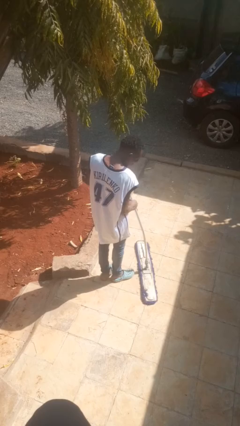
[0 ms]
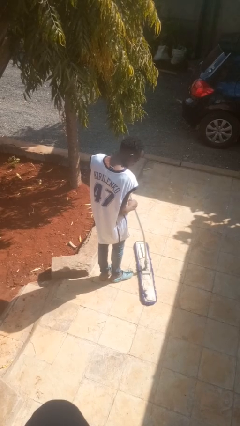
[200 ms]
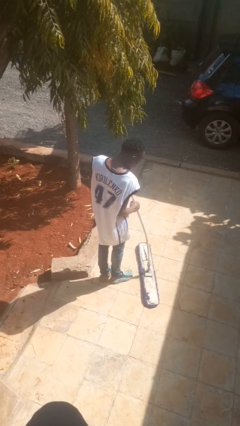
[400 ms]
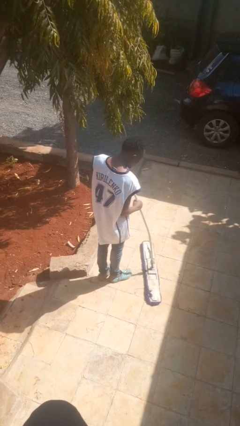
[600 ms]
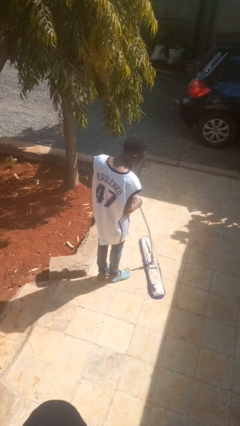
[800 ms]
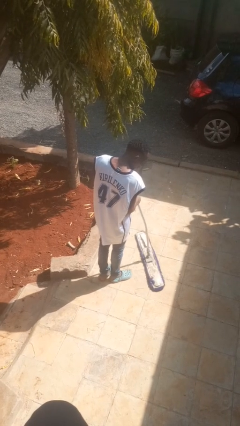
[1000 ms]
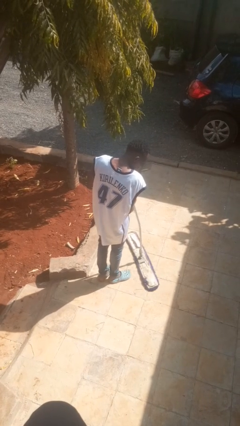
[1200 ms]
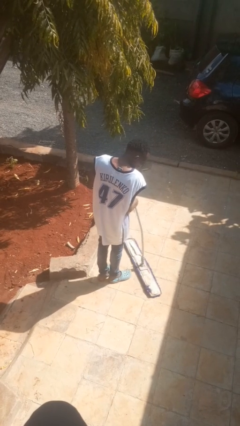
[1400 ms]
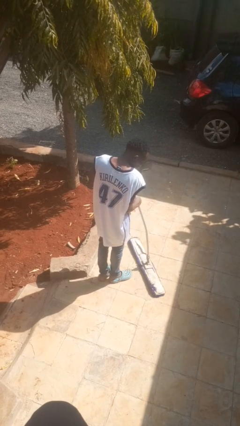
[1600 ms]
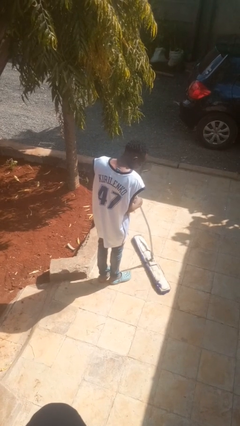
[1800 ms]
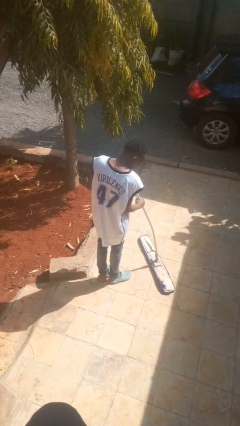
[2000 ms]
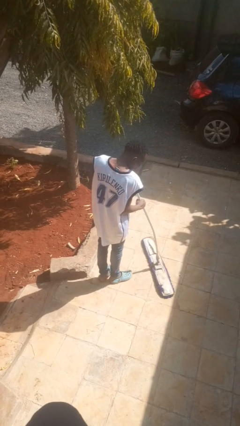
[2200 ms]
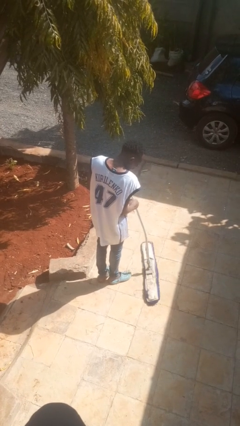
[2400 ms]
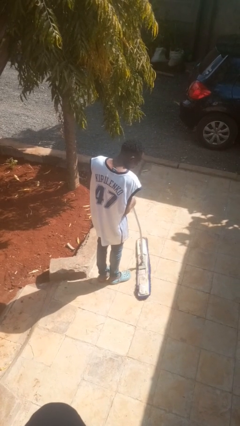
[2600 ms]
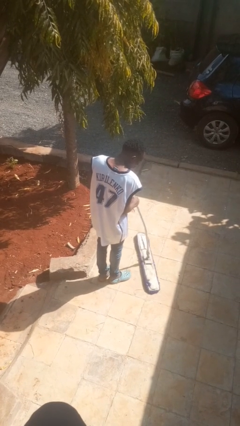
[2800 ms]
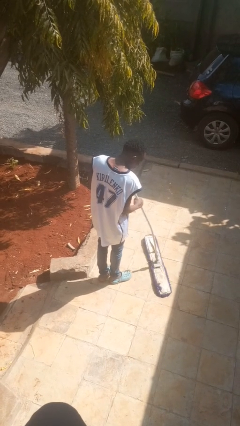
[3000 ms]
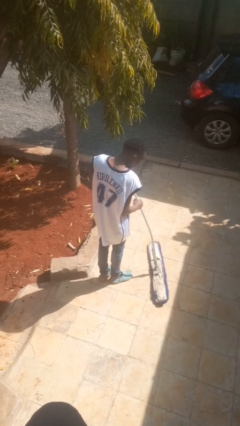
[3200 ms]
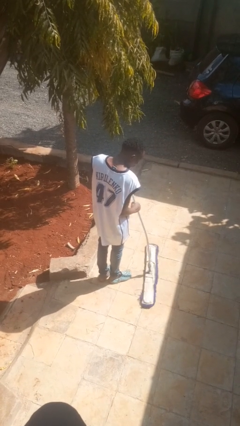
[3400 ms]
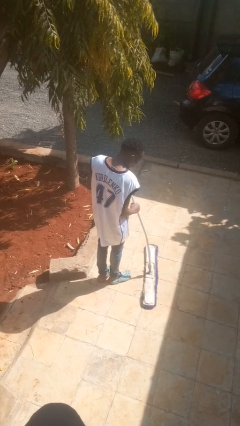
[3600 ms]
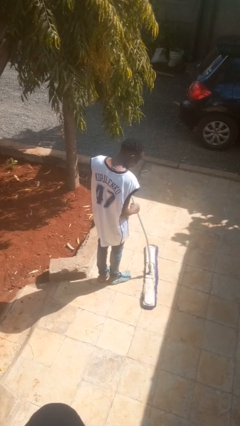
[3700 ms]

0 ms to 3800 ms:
person mops

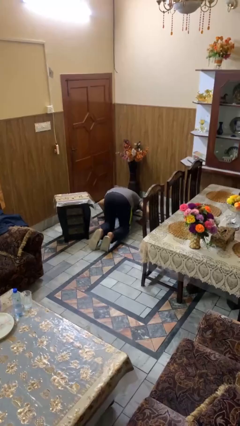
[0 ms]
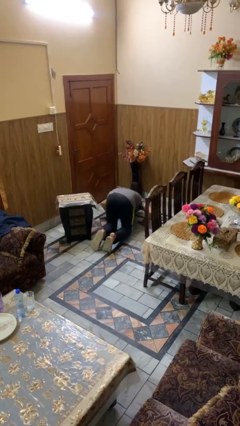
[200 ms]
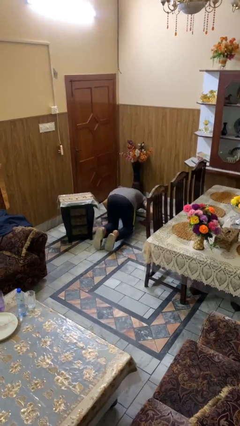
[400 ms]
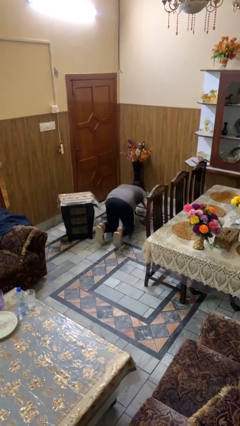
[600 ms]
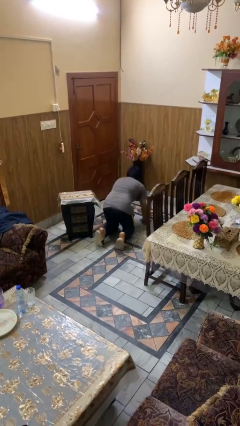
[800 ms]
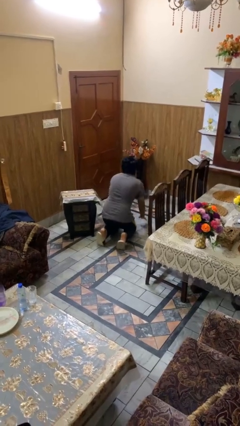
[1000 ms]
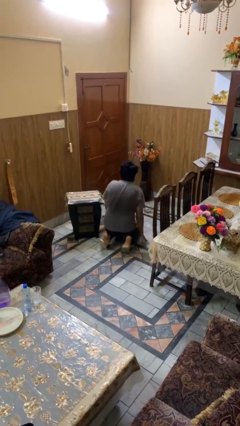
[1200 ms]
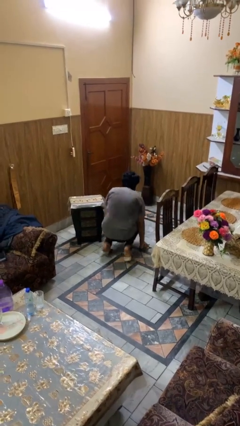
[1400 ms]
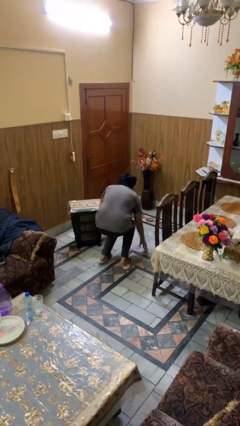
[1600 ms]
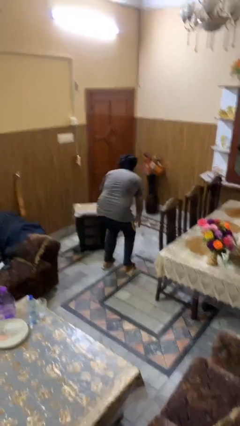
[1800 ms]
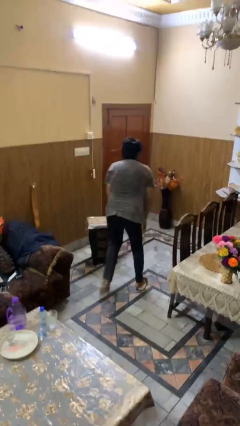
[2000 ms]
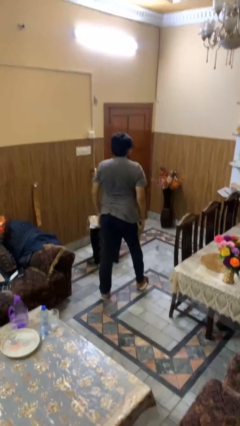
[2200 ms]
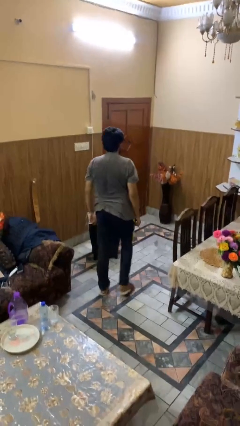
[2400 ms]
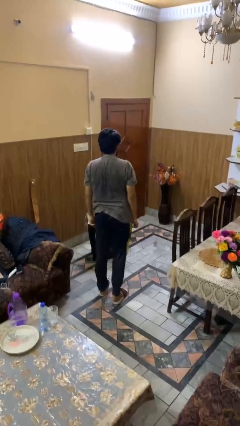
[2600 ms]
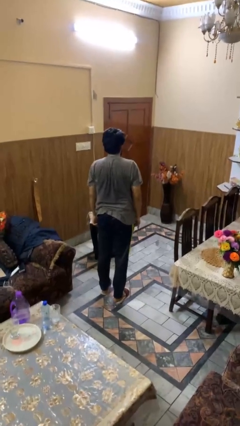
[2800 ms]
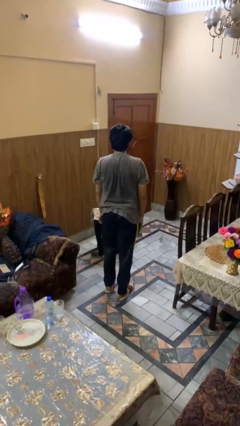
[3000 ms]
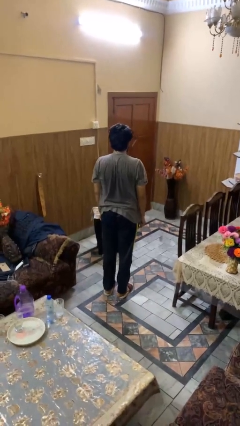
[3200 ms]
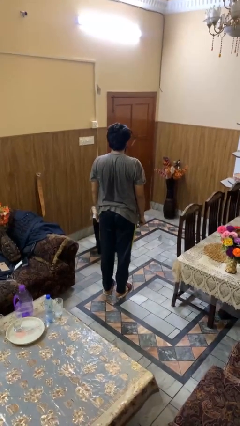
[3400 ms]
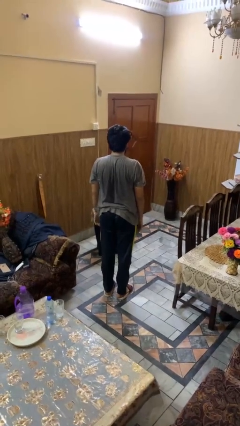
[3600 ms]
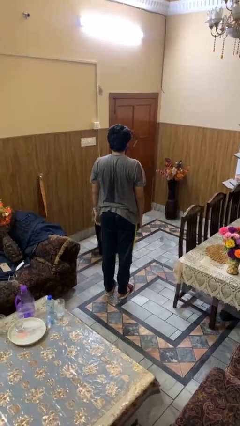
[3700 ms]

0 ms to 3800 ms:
person stands up from floor

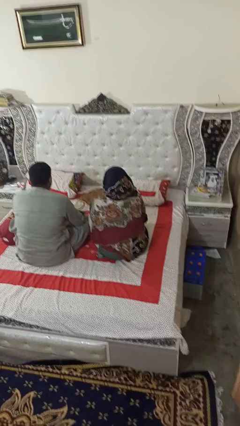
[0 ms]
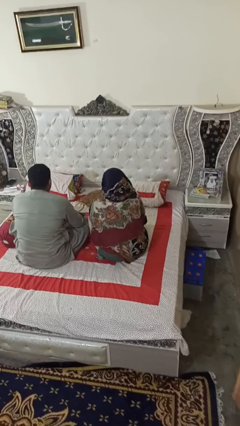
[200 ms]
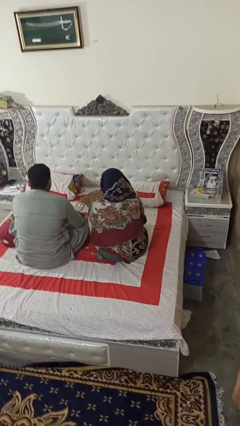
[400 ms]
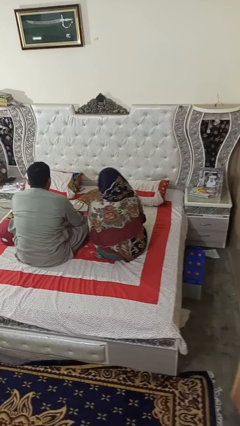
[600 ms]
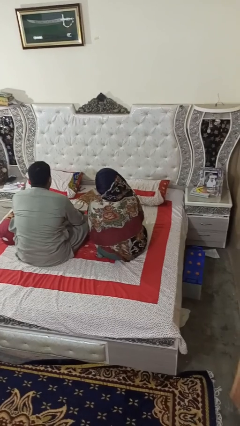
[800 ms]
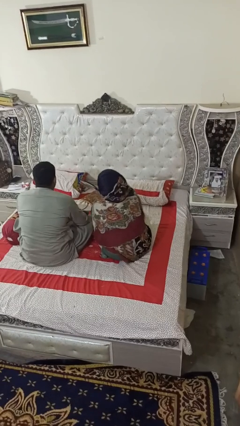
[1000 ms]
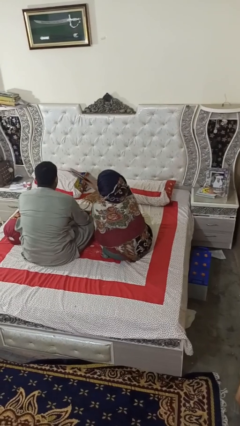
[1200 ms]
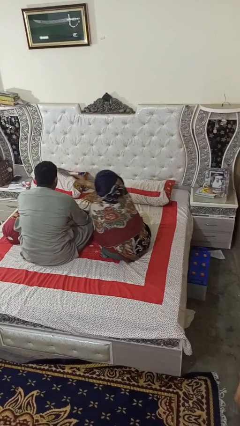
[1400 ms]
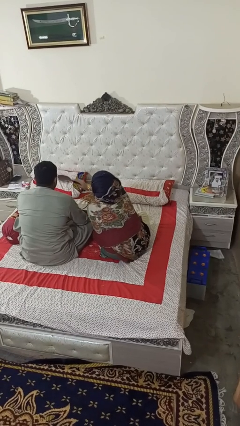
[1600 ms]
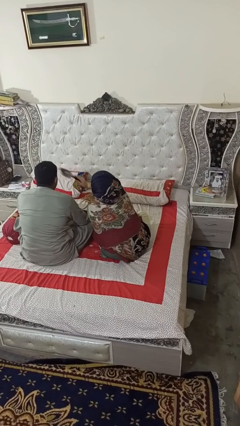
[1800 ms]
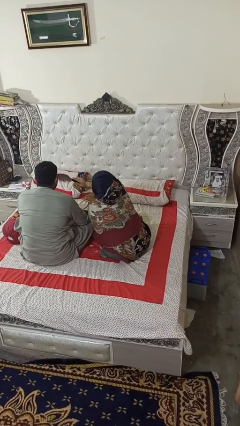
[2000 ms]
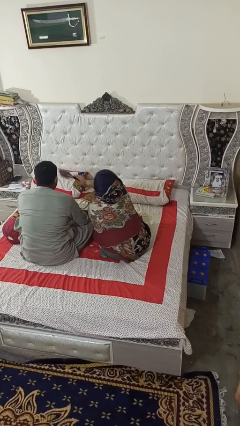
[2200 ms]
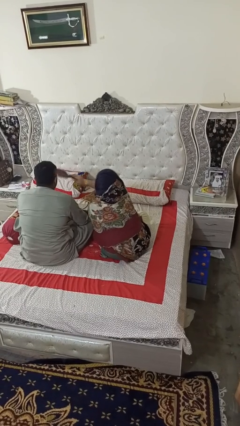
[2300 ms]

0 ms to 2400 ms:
person brushes hair of person

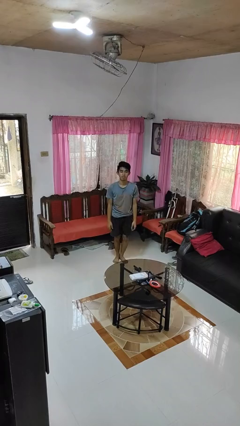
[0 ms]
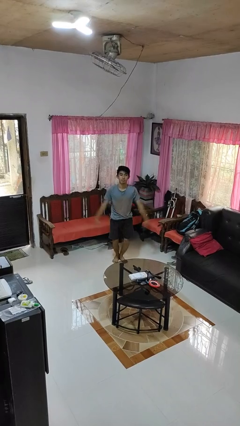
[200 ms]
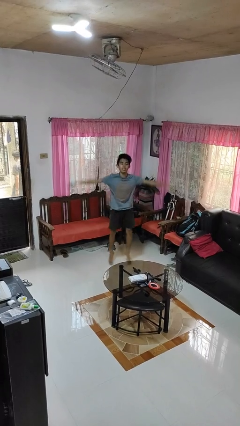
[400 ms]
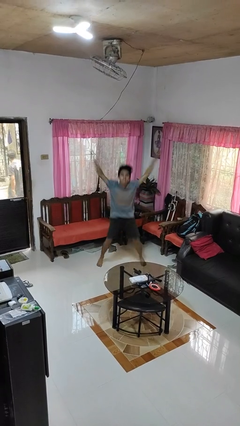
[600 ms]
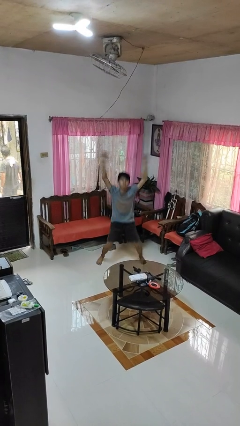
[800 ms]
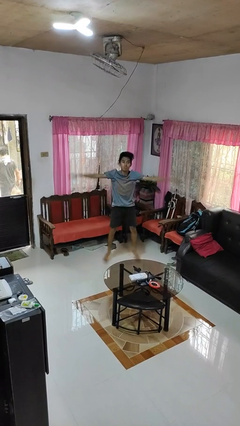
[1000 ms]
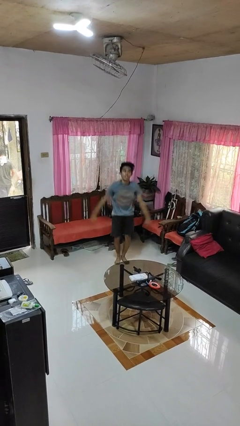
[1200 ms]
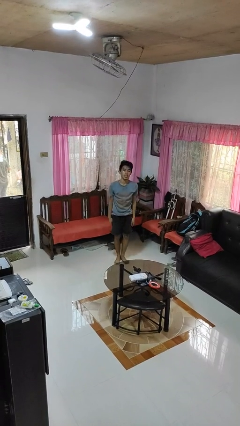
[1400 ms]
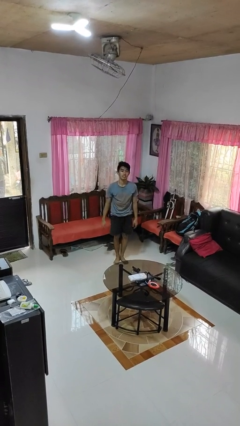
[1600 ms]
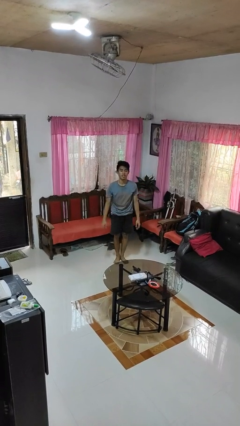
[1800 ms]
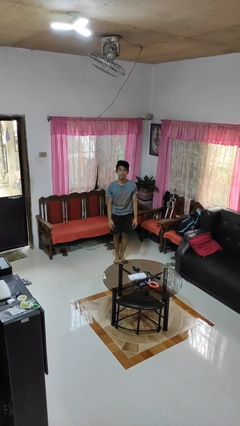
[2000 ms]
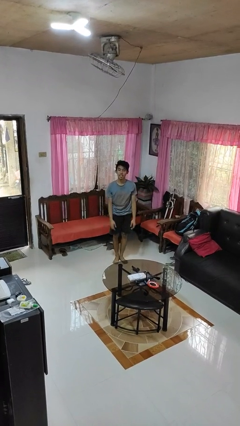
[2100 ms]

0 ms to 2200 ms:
person exercises with jumping jacks

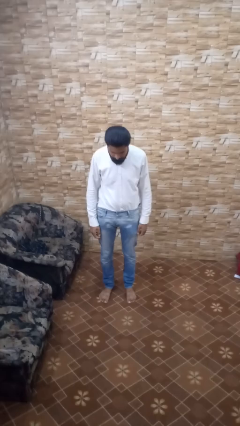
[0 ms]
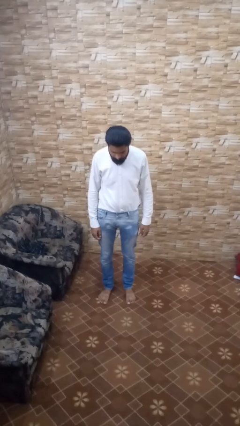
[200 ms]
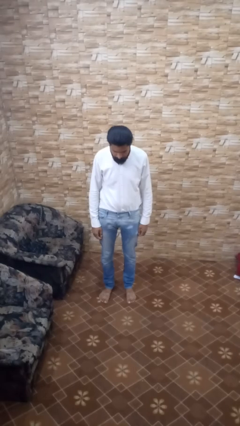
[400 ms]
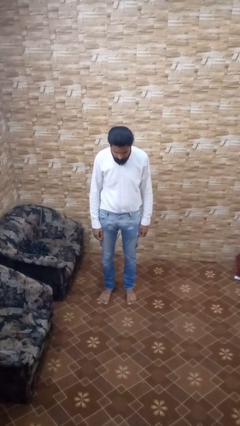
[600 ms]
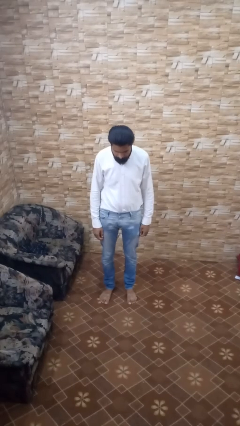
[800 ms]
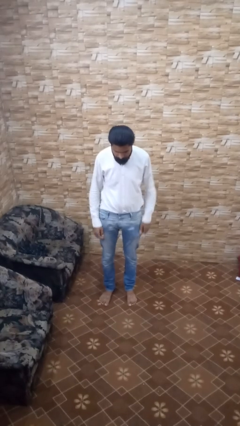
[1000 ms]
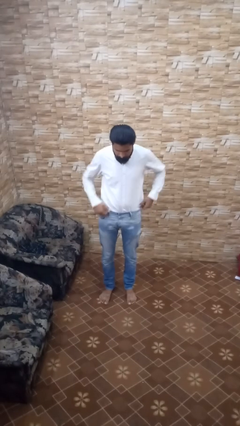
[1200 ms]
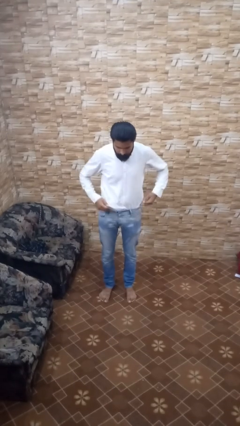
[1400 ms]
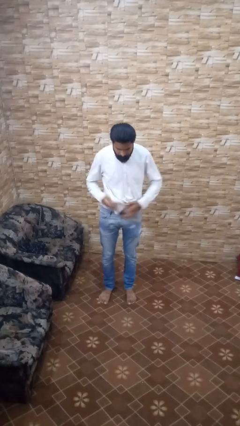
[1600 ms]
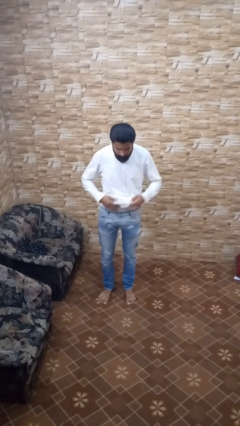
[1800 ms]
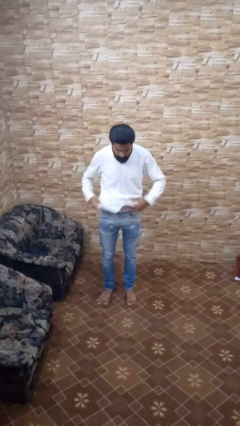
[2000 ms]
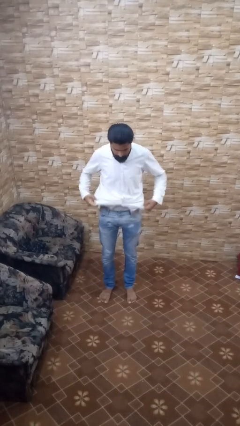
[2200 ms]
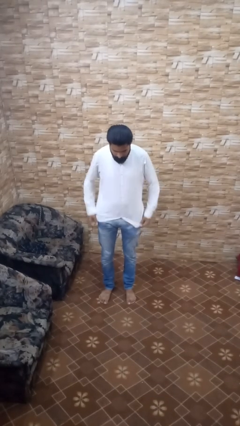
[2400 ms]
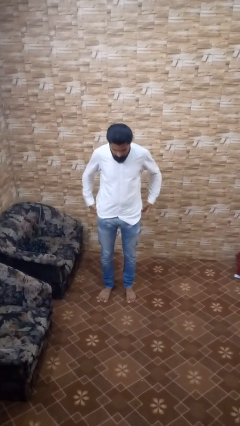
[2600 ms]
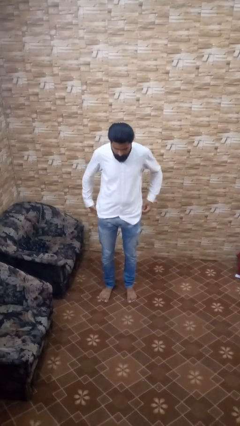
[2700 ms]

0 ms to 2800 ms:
person untucks shirt

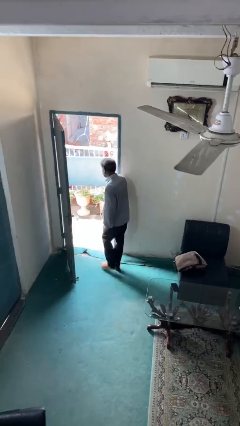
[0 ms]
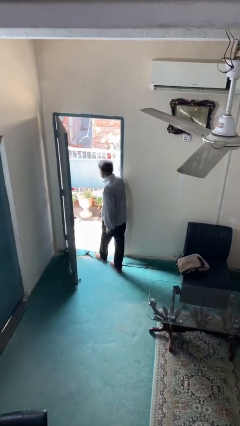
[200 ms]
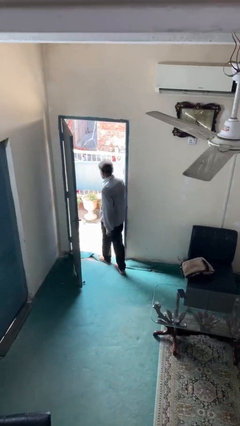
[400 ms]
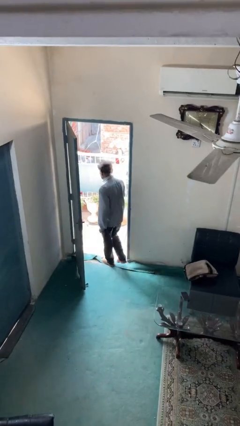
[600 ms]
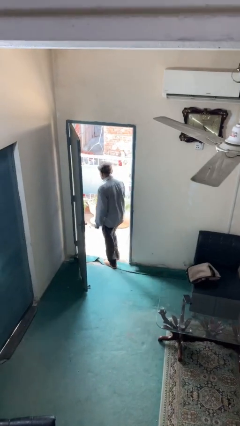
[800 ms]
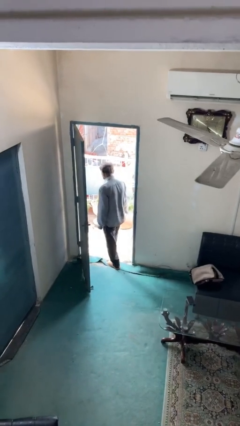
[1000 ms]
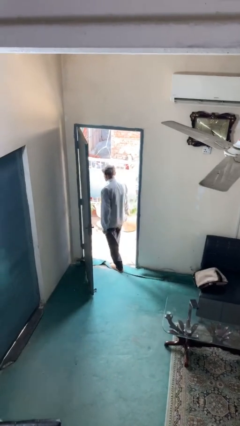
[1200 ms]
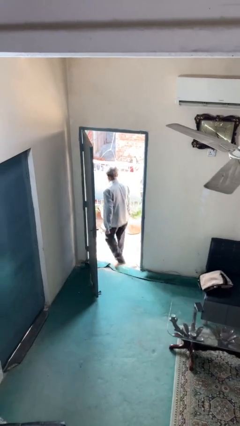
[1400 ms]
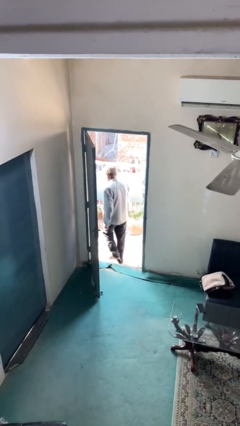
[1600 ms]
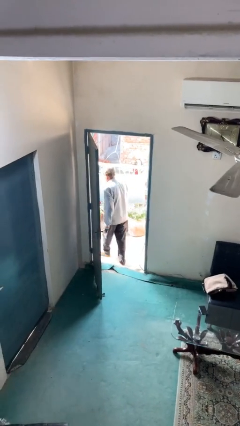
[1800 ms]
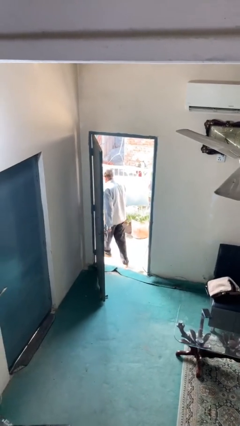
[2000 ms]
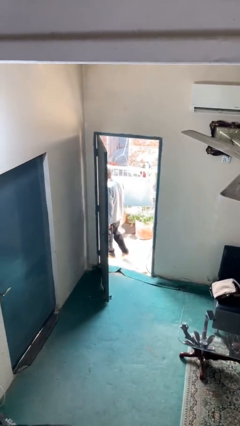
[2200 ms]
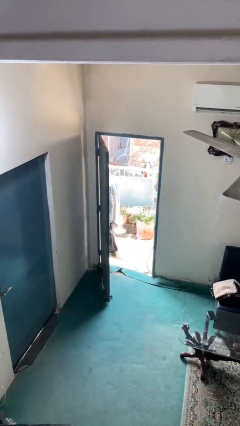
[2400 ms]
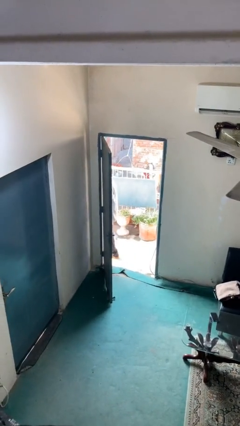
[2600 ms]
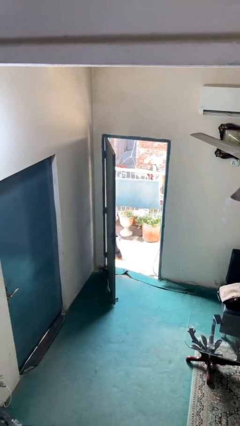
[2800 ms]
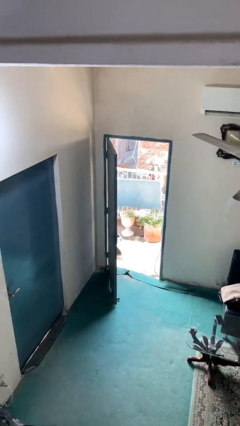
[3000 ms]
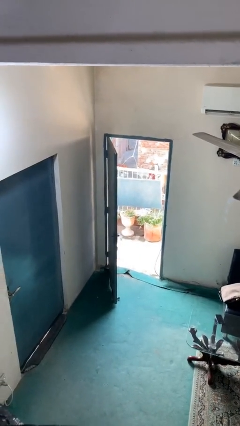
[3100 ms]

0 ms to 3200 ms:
person exits scene through structure
